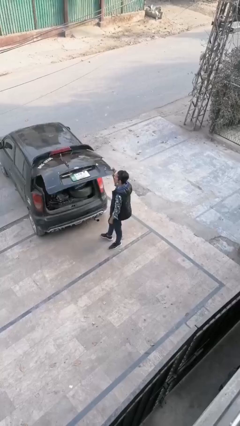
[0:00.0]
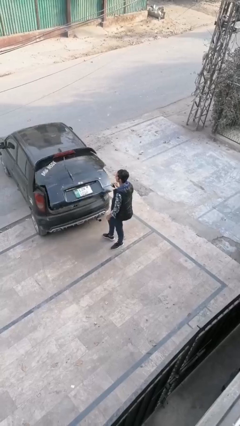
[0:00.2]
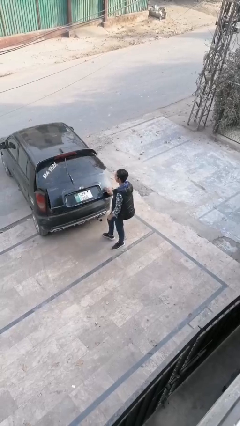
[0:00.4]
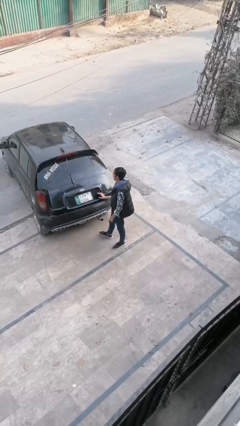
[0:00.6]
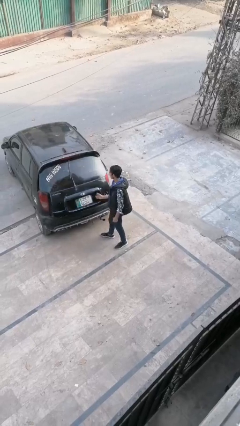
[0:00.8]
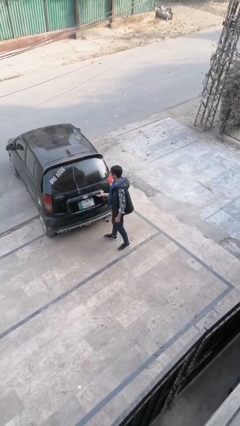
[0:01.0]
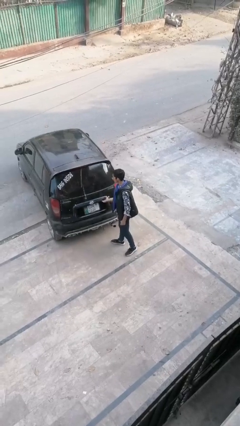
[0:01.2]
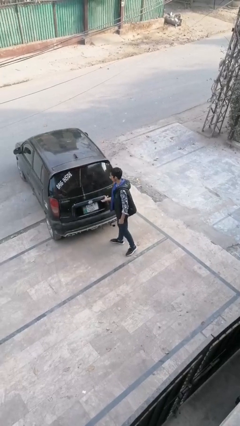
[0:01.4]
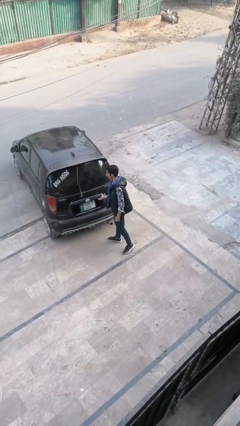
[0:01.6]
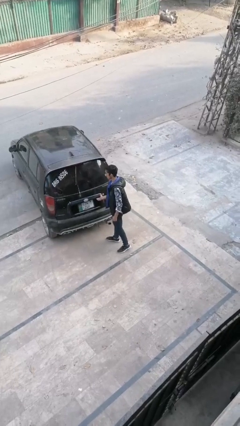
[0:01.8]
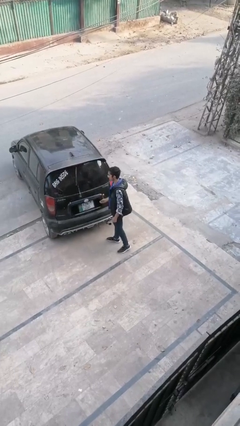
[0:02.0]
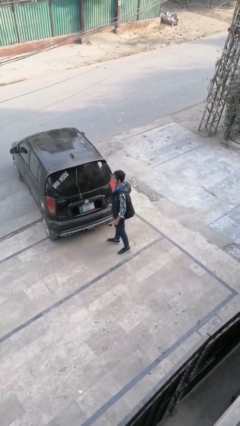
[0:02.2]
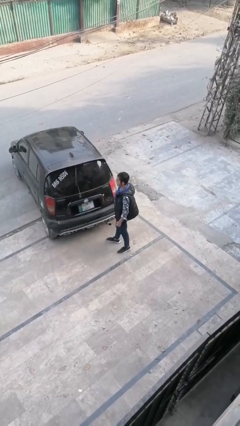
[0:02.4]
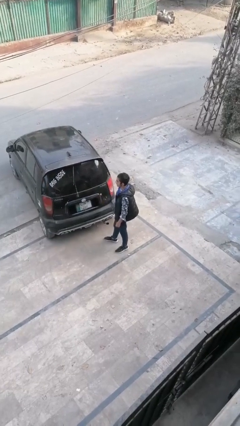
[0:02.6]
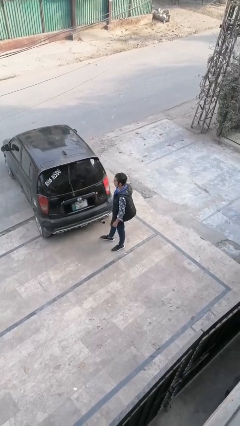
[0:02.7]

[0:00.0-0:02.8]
person closes car trunk

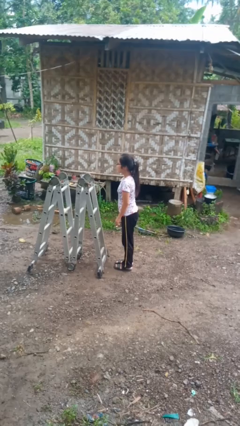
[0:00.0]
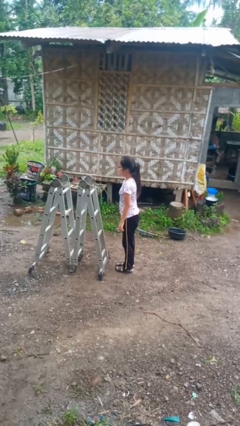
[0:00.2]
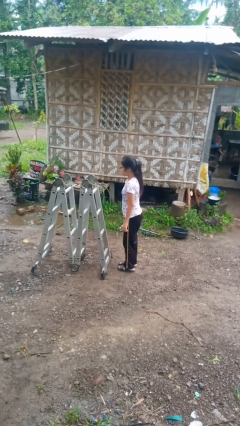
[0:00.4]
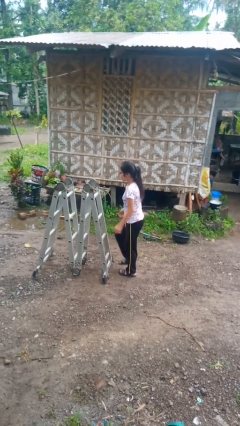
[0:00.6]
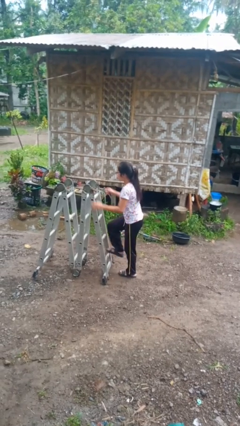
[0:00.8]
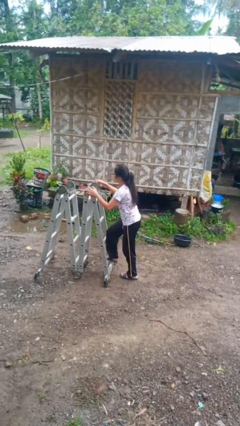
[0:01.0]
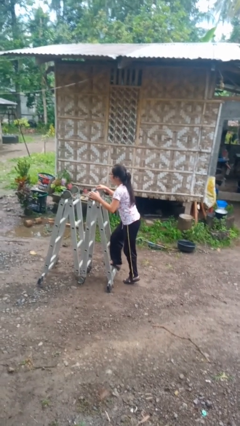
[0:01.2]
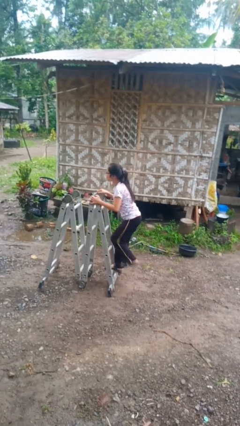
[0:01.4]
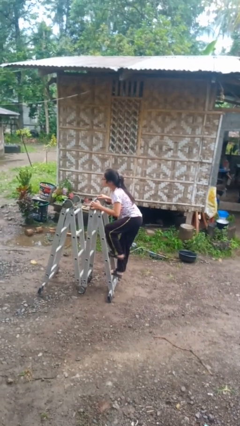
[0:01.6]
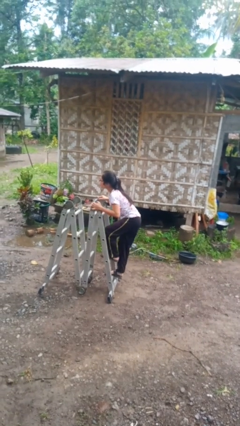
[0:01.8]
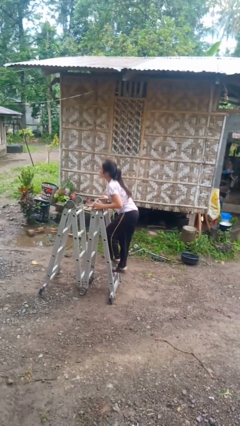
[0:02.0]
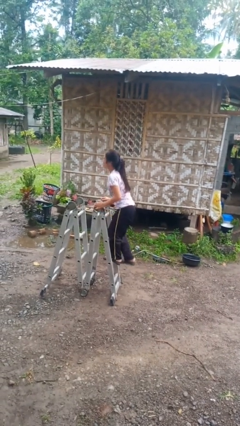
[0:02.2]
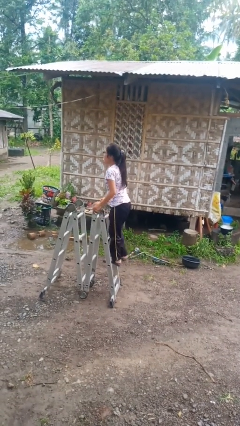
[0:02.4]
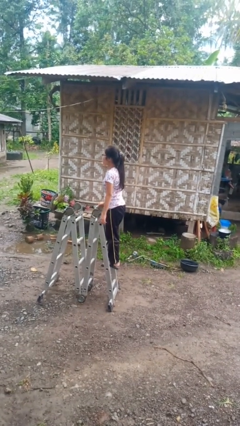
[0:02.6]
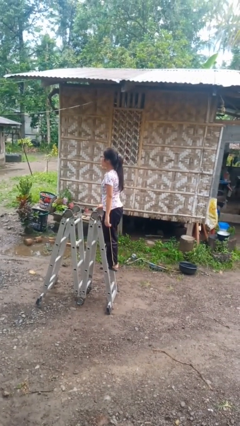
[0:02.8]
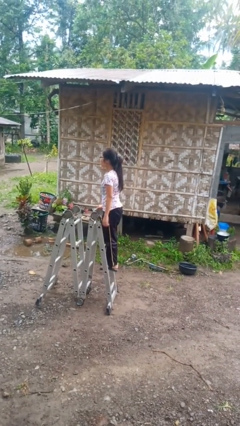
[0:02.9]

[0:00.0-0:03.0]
person climbs up ladder

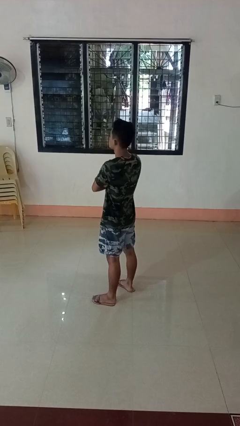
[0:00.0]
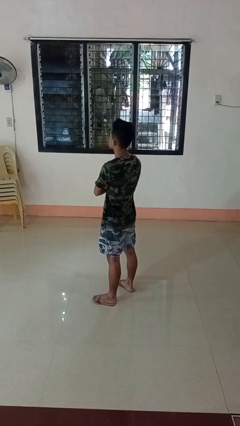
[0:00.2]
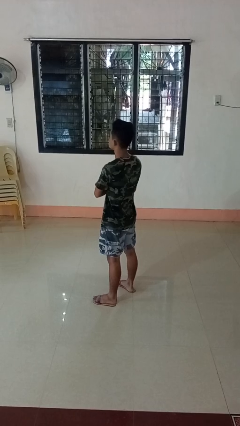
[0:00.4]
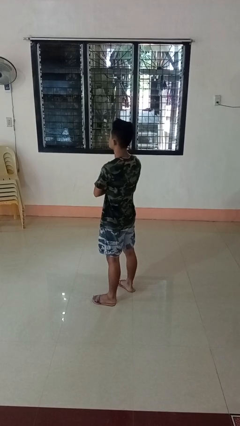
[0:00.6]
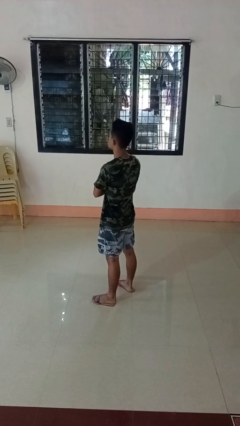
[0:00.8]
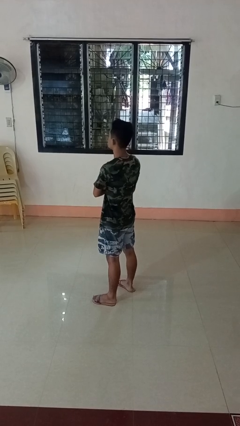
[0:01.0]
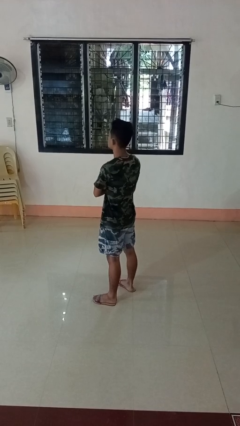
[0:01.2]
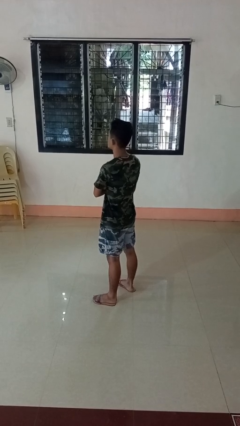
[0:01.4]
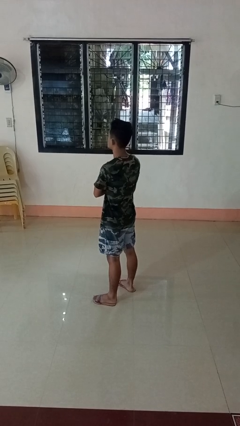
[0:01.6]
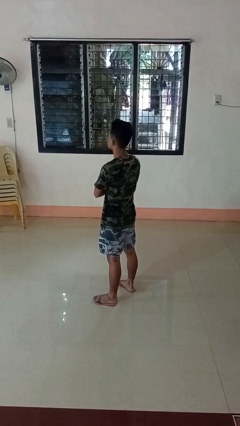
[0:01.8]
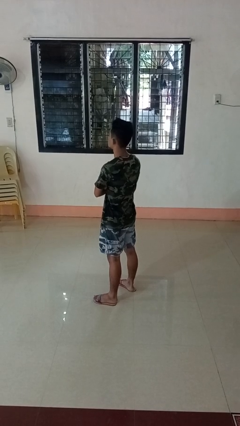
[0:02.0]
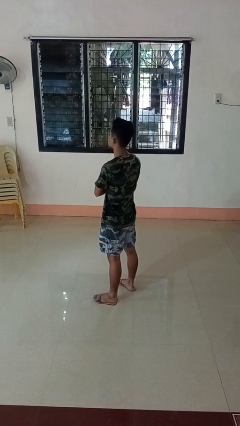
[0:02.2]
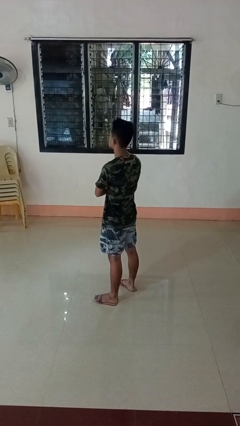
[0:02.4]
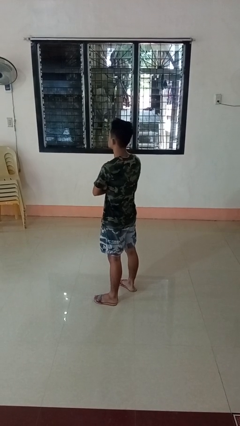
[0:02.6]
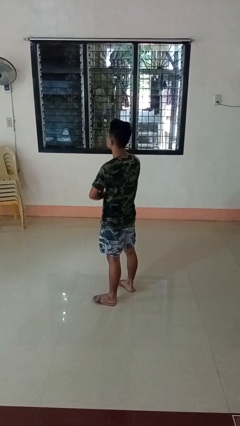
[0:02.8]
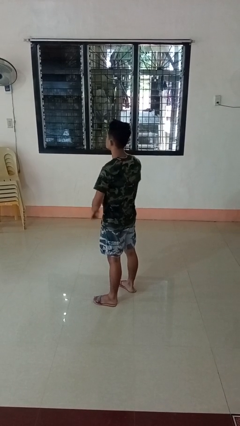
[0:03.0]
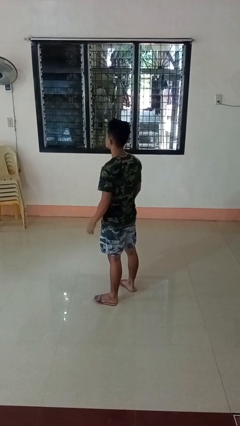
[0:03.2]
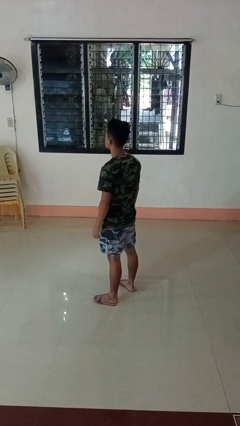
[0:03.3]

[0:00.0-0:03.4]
person crosses arms

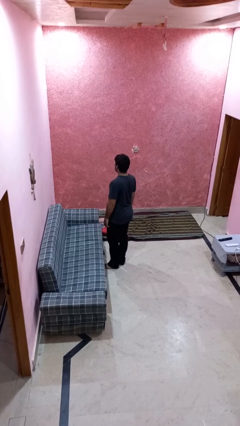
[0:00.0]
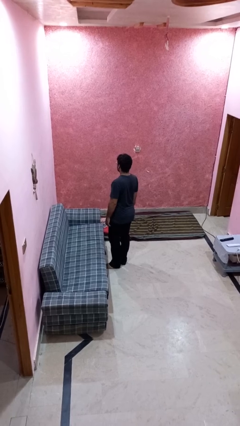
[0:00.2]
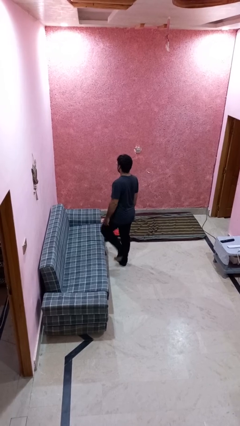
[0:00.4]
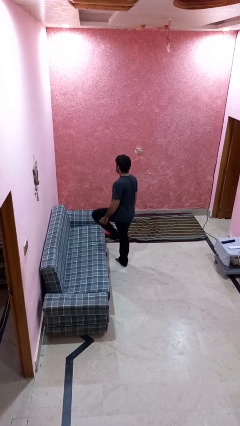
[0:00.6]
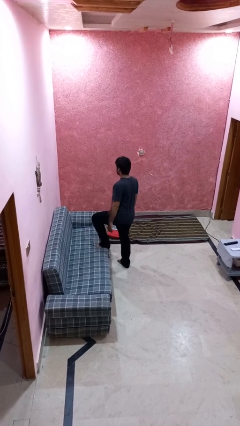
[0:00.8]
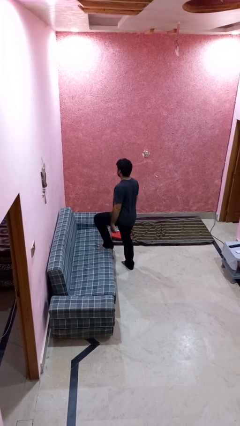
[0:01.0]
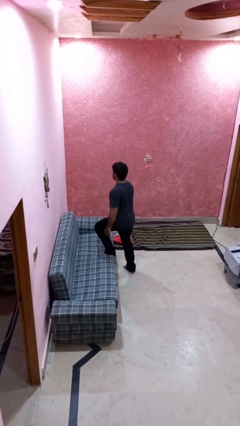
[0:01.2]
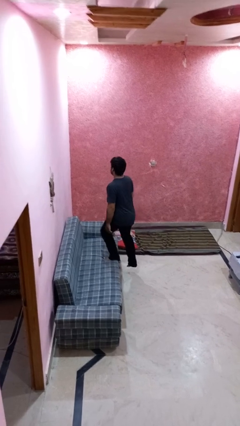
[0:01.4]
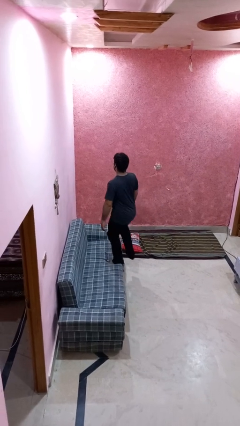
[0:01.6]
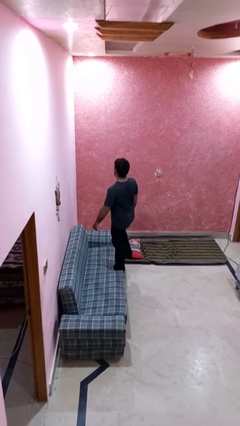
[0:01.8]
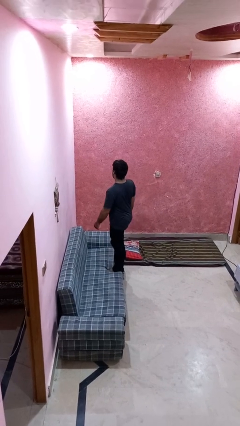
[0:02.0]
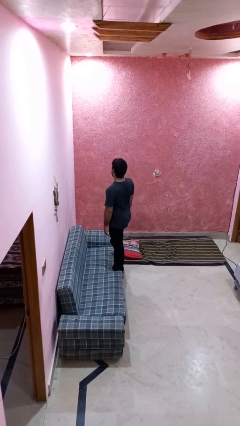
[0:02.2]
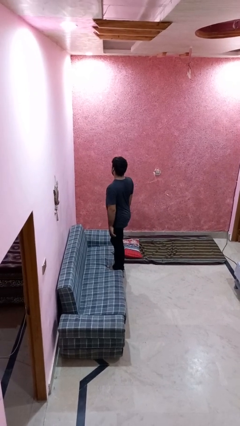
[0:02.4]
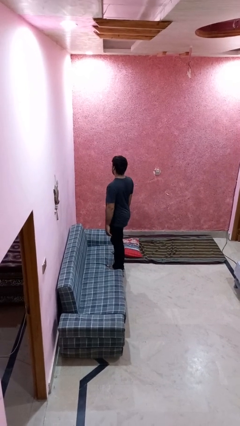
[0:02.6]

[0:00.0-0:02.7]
person climbs on couch

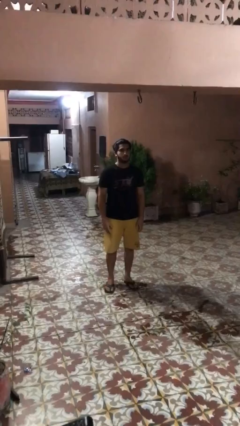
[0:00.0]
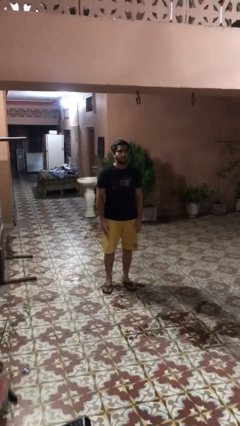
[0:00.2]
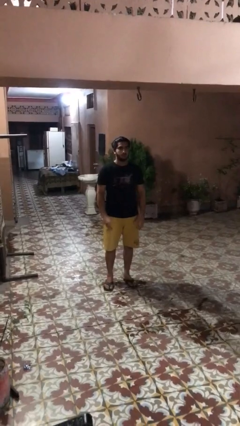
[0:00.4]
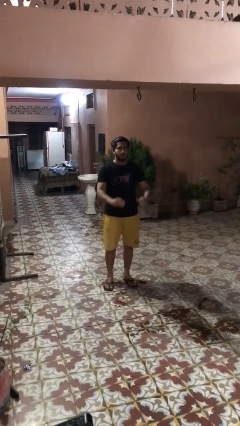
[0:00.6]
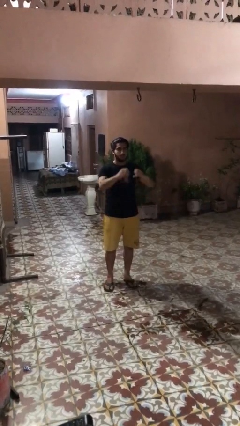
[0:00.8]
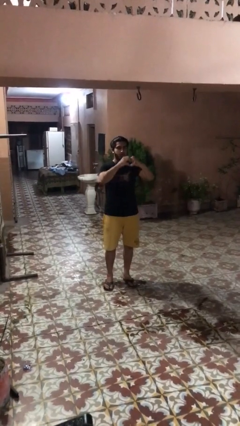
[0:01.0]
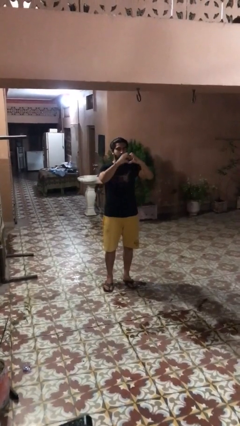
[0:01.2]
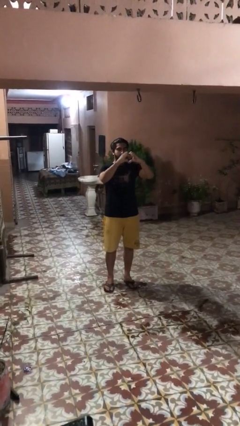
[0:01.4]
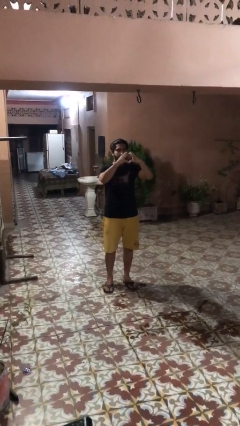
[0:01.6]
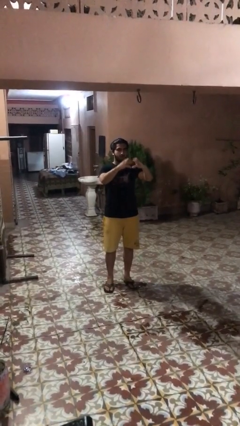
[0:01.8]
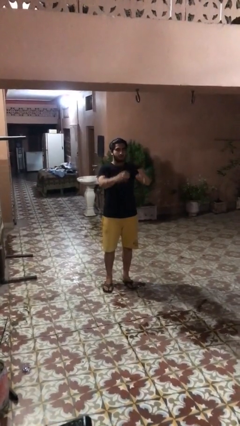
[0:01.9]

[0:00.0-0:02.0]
person gestures heart

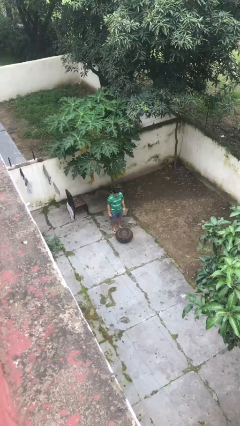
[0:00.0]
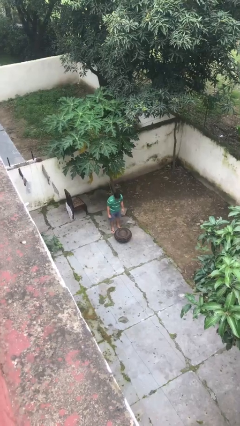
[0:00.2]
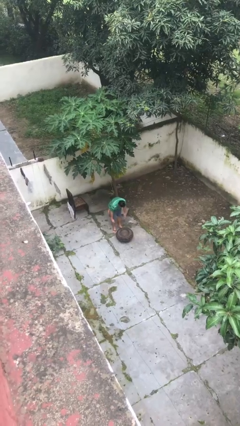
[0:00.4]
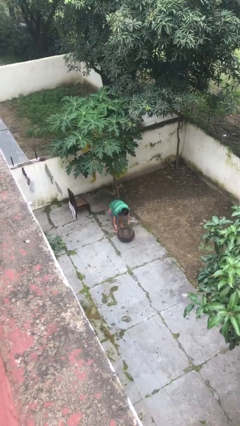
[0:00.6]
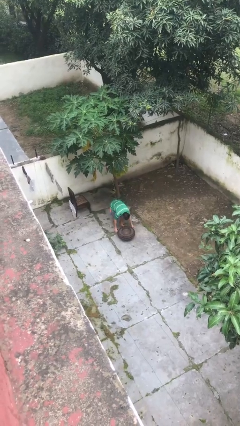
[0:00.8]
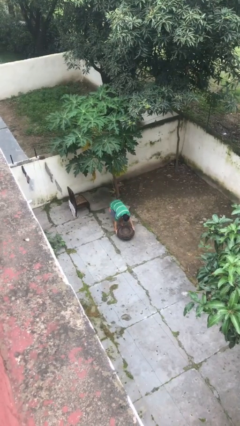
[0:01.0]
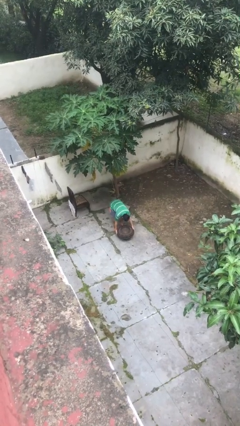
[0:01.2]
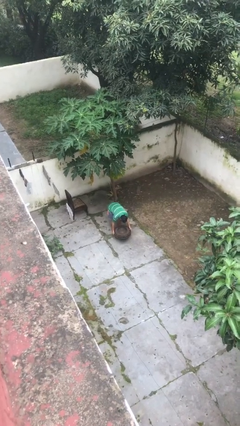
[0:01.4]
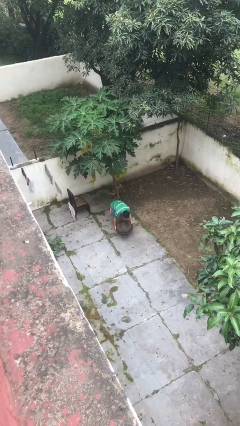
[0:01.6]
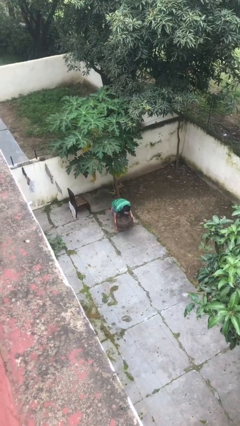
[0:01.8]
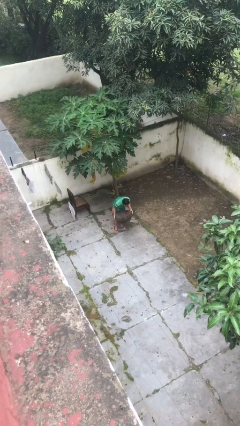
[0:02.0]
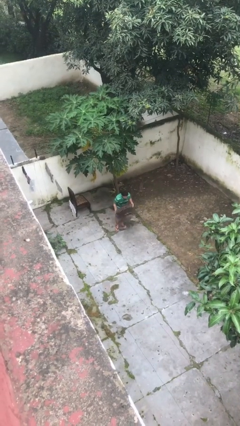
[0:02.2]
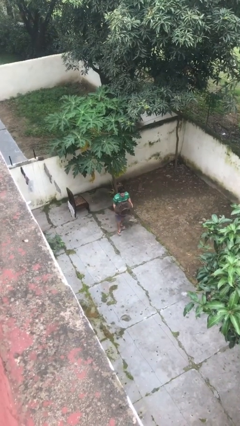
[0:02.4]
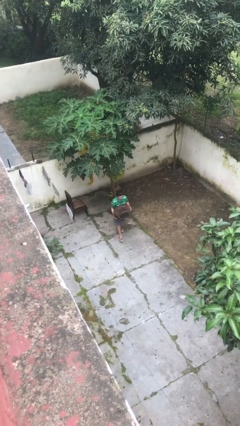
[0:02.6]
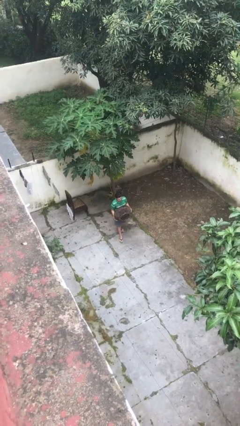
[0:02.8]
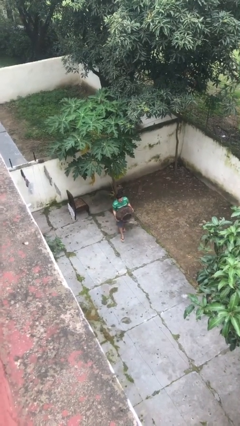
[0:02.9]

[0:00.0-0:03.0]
person picks up object from floor

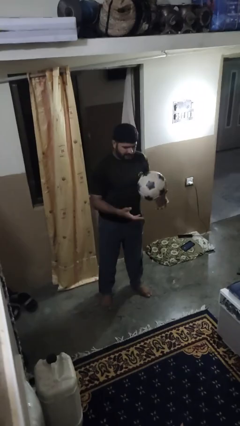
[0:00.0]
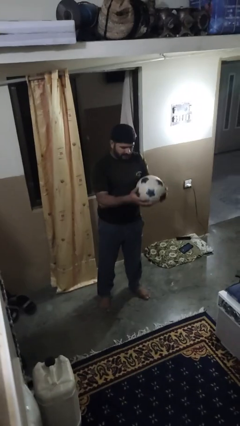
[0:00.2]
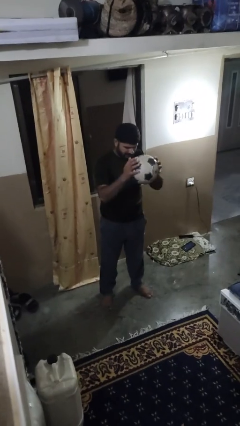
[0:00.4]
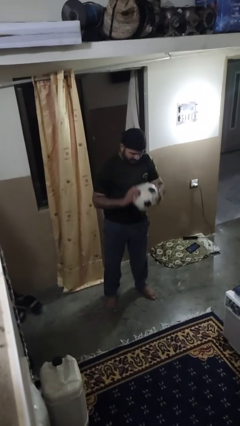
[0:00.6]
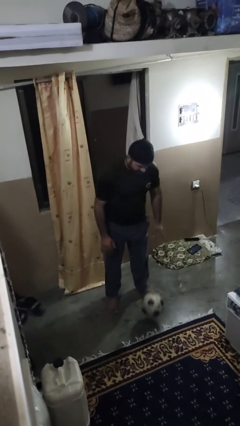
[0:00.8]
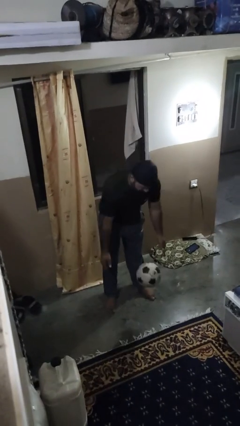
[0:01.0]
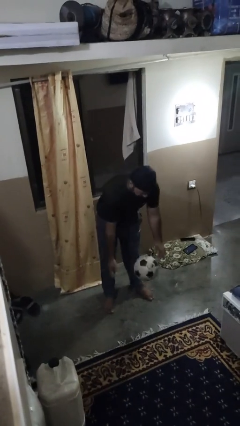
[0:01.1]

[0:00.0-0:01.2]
person bounces ball on floor
